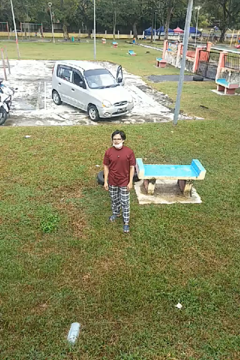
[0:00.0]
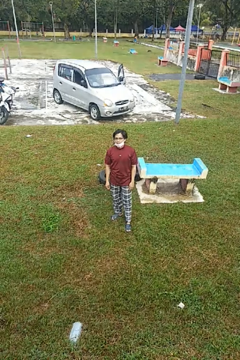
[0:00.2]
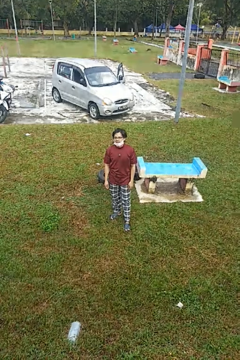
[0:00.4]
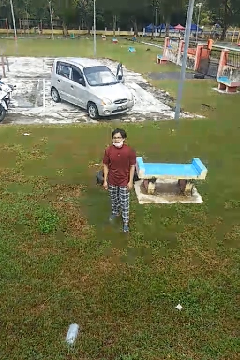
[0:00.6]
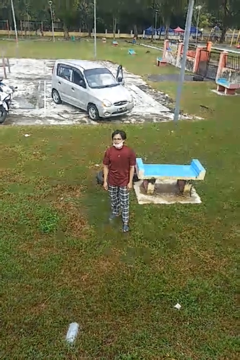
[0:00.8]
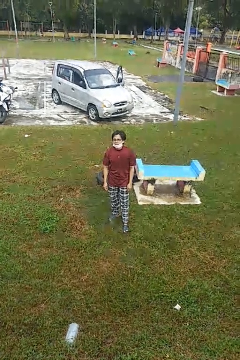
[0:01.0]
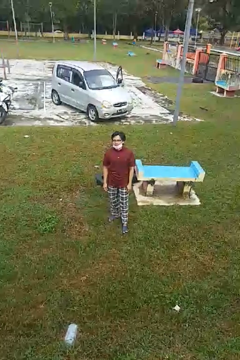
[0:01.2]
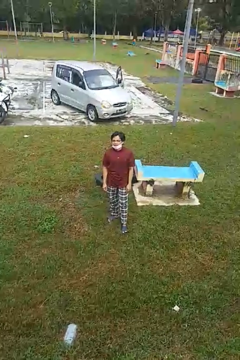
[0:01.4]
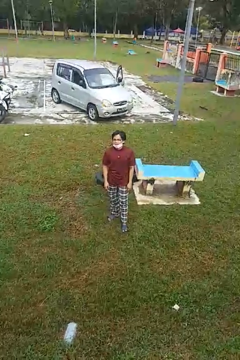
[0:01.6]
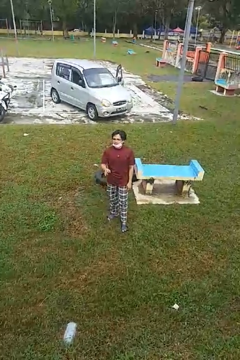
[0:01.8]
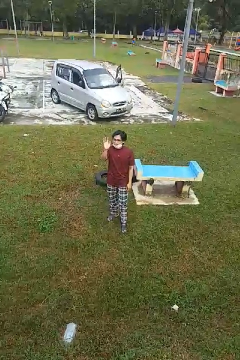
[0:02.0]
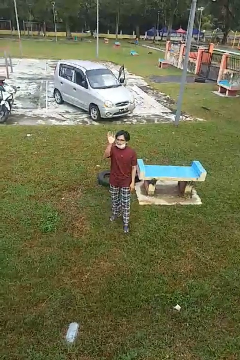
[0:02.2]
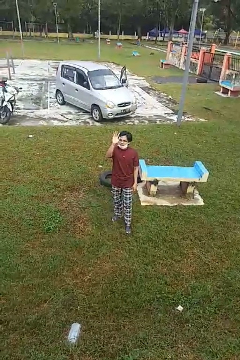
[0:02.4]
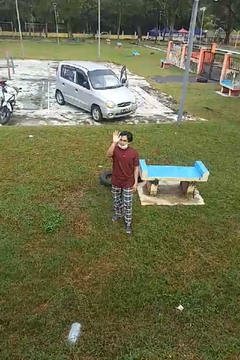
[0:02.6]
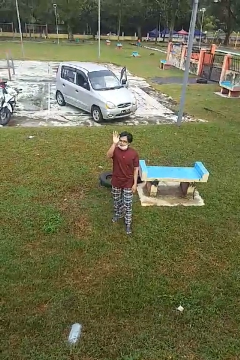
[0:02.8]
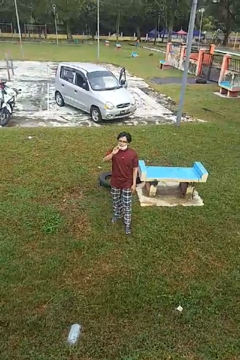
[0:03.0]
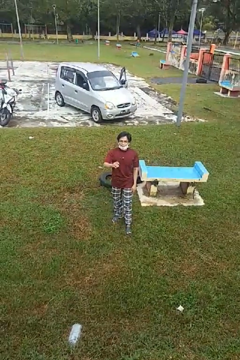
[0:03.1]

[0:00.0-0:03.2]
person waves at person

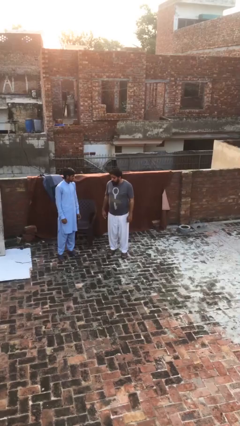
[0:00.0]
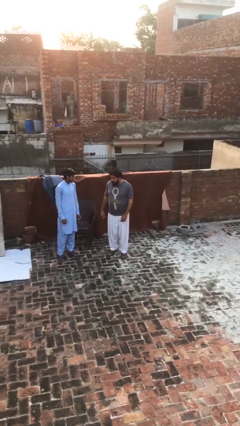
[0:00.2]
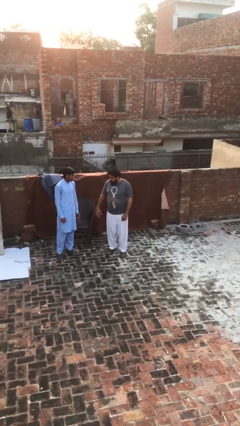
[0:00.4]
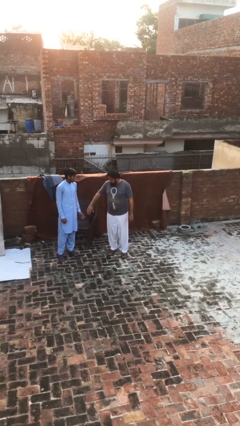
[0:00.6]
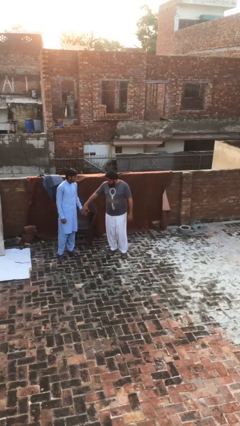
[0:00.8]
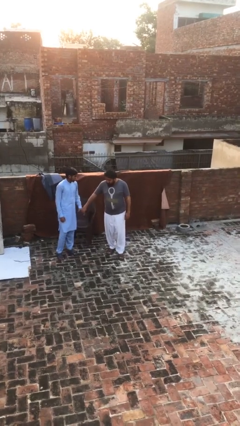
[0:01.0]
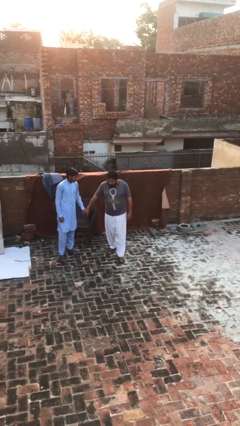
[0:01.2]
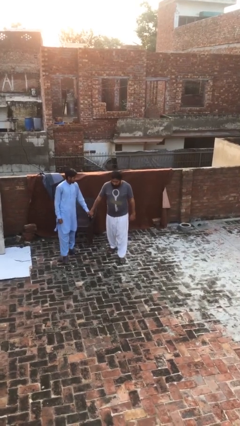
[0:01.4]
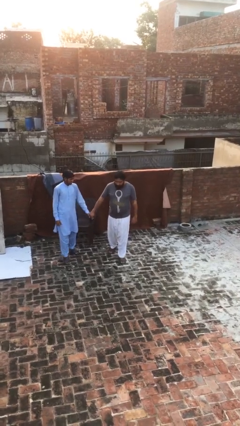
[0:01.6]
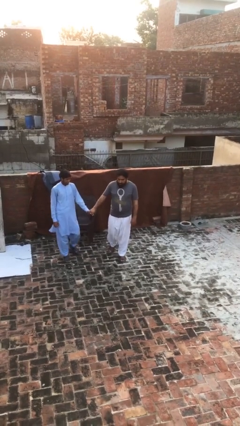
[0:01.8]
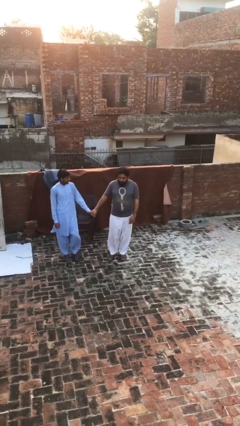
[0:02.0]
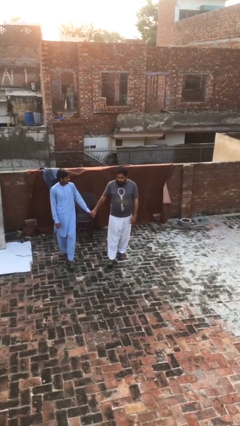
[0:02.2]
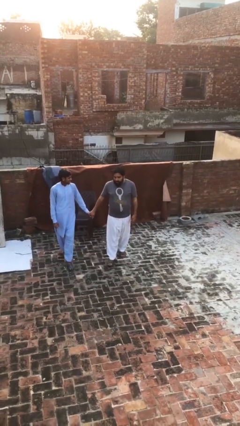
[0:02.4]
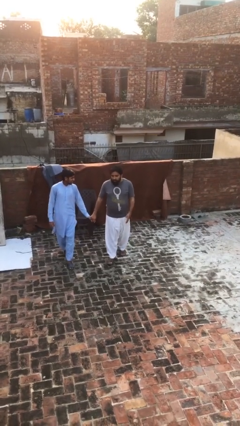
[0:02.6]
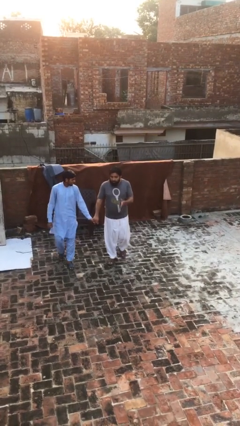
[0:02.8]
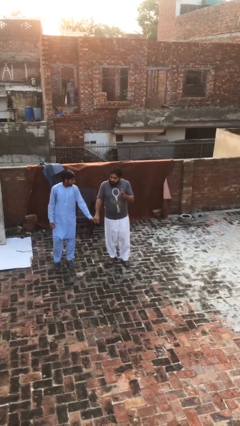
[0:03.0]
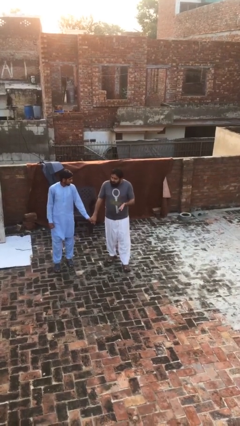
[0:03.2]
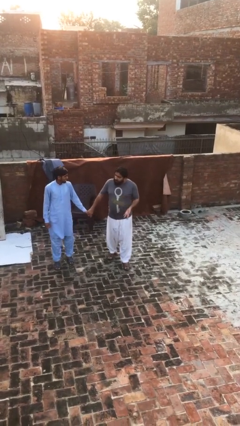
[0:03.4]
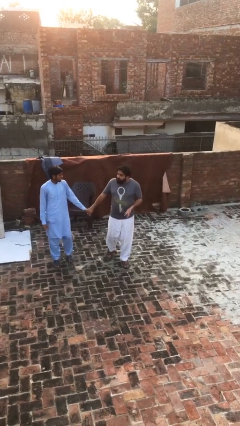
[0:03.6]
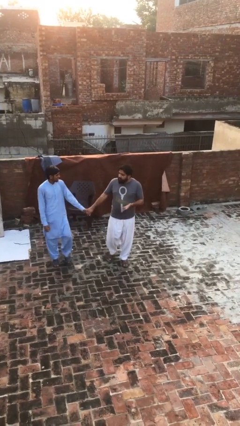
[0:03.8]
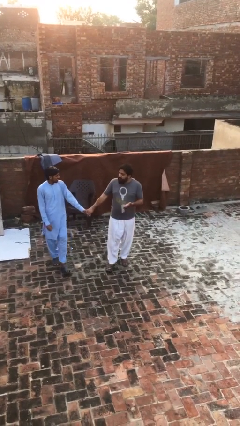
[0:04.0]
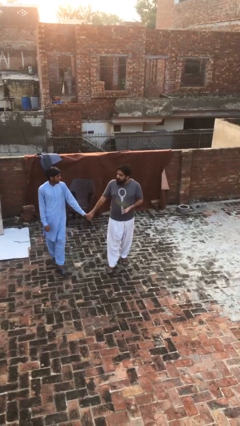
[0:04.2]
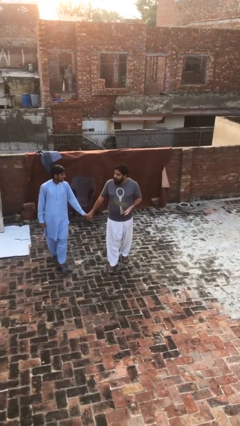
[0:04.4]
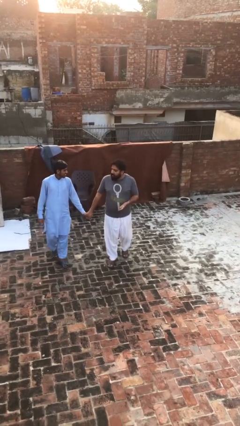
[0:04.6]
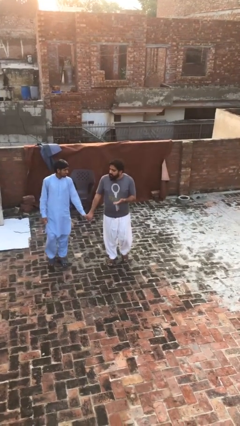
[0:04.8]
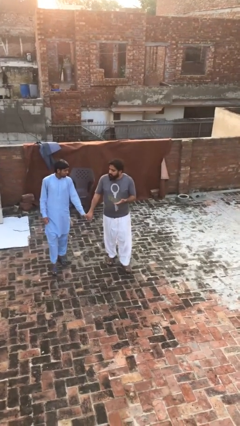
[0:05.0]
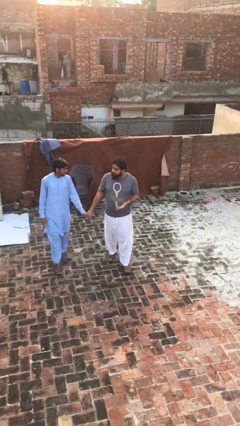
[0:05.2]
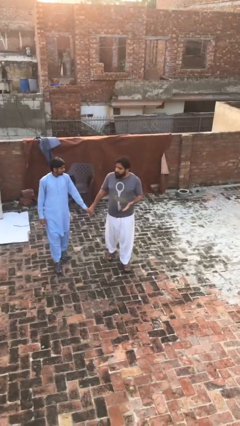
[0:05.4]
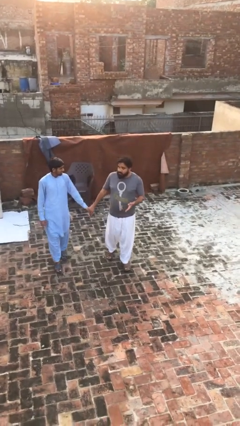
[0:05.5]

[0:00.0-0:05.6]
person holds hand

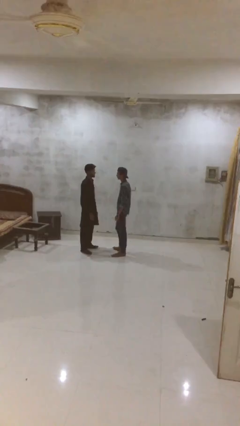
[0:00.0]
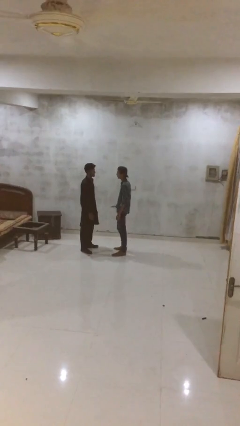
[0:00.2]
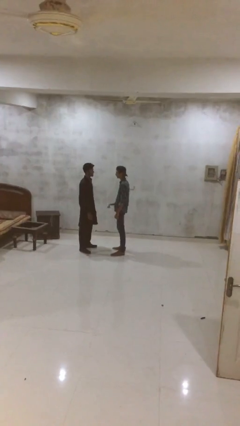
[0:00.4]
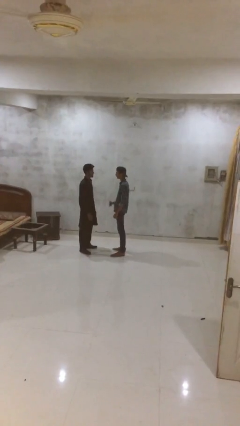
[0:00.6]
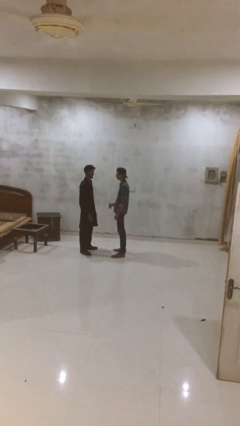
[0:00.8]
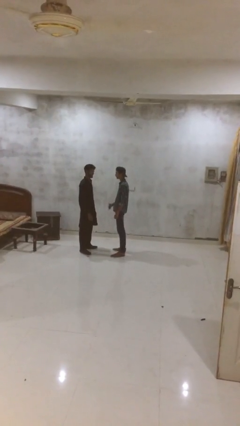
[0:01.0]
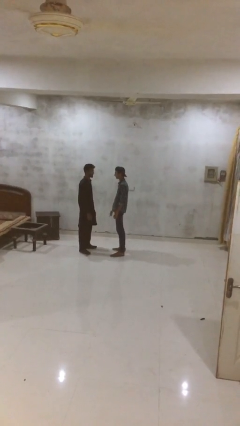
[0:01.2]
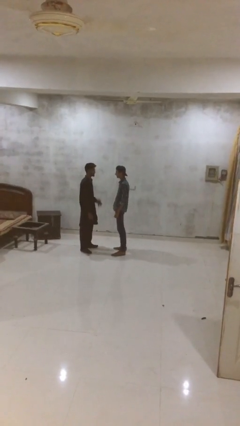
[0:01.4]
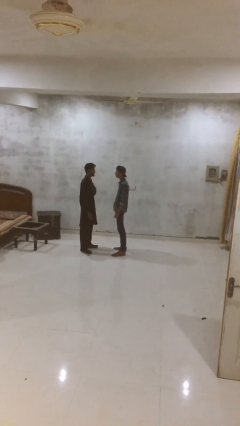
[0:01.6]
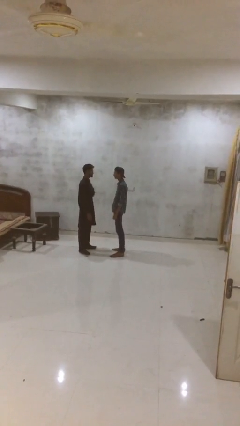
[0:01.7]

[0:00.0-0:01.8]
person talks to person

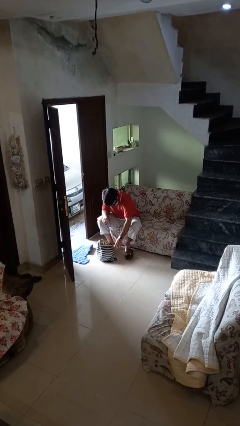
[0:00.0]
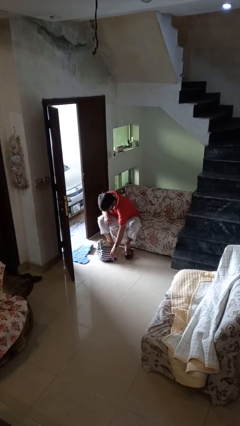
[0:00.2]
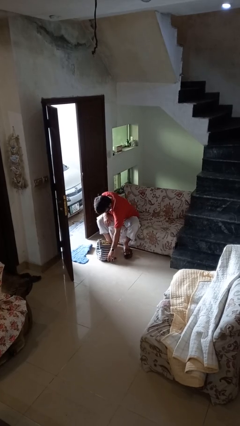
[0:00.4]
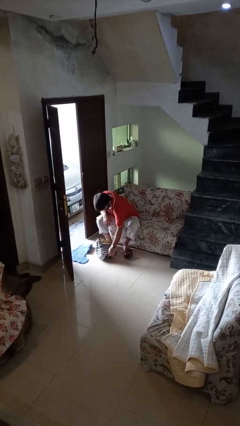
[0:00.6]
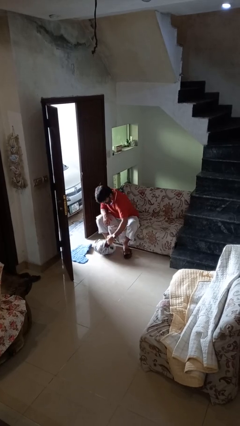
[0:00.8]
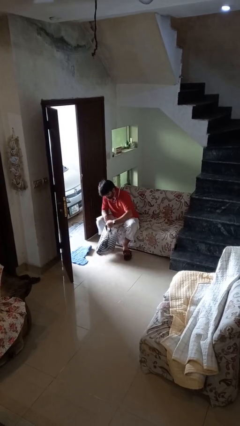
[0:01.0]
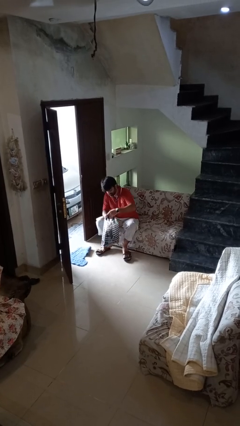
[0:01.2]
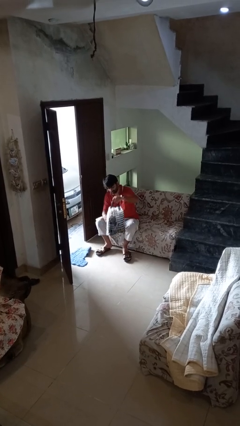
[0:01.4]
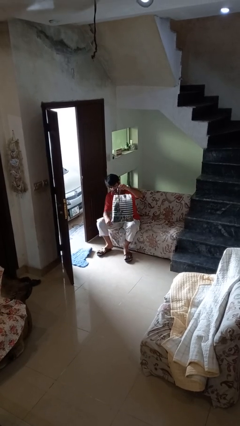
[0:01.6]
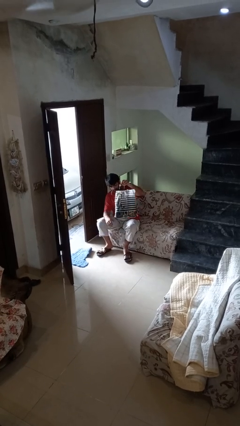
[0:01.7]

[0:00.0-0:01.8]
person picks up object from floor

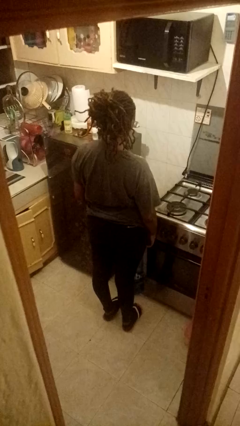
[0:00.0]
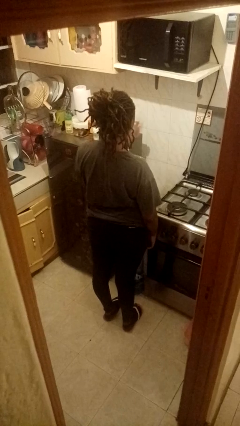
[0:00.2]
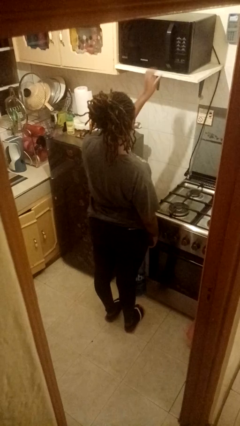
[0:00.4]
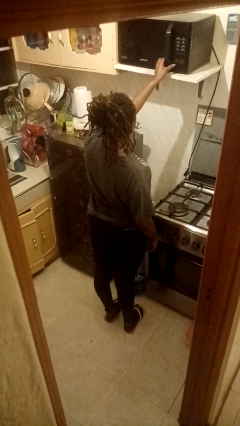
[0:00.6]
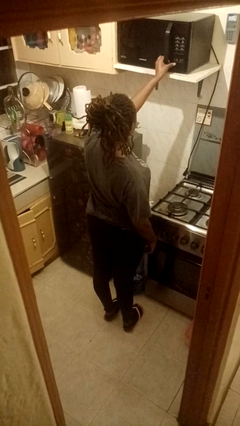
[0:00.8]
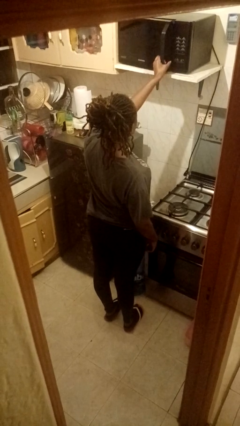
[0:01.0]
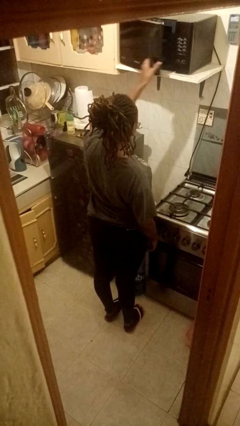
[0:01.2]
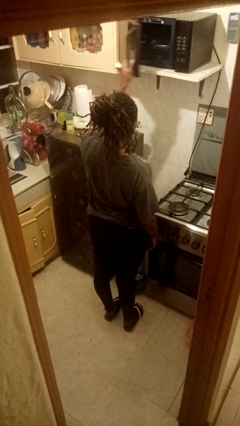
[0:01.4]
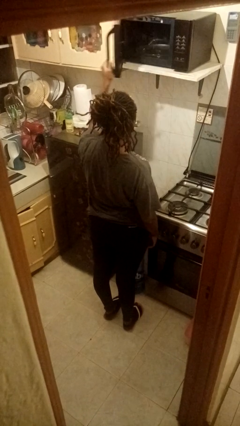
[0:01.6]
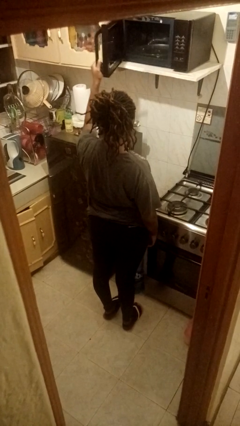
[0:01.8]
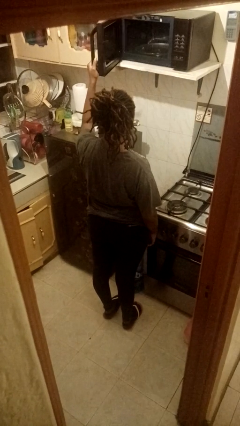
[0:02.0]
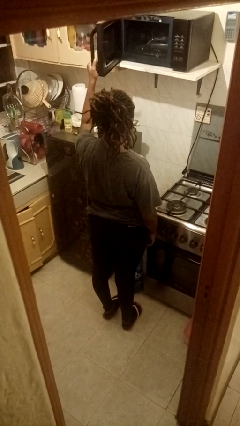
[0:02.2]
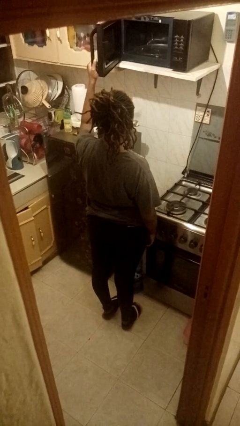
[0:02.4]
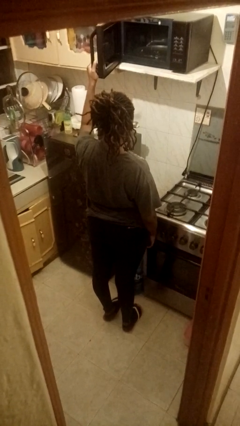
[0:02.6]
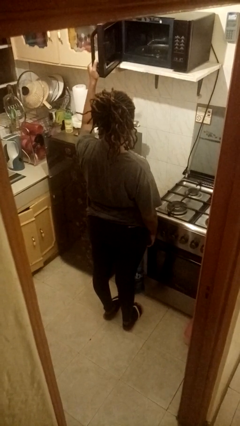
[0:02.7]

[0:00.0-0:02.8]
person opens microwave

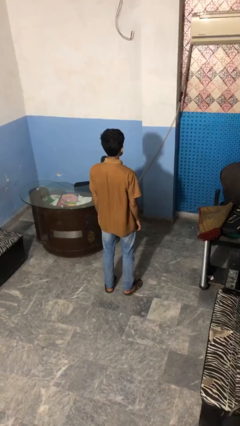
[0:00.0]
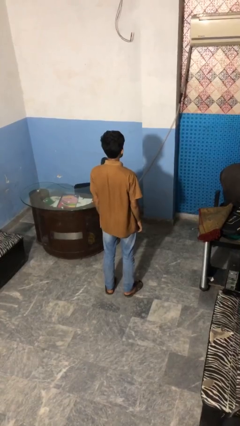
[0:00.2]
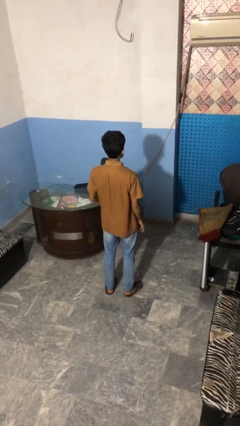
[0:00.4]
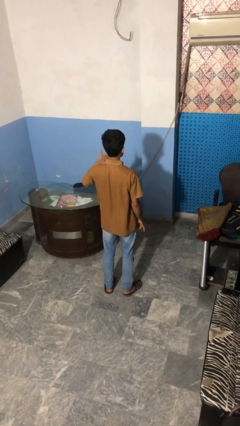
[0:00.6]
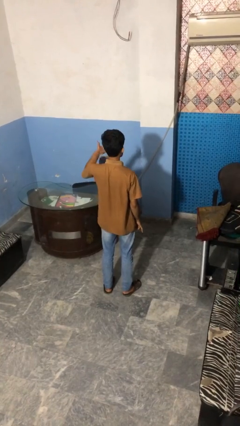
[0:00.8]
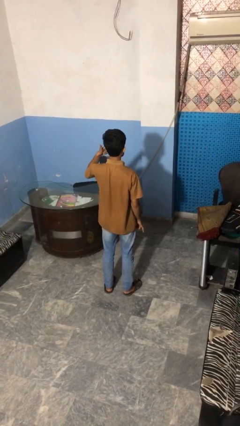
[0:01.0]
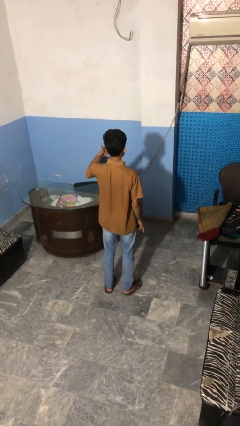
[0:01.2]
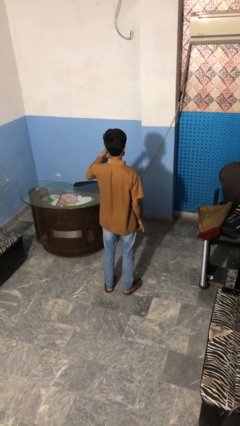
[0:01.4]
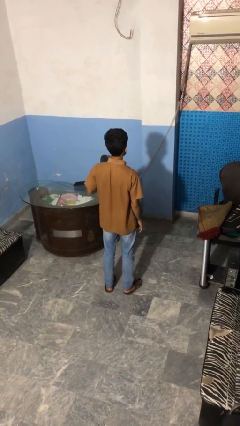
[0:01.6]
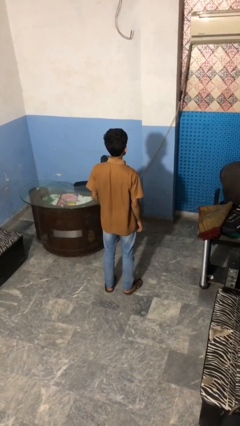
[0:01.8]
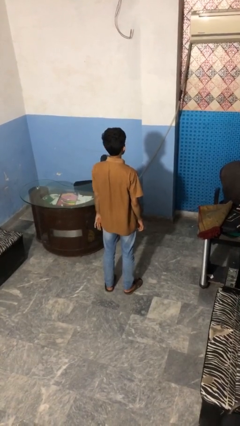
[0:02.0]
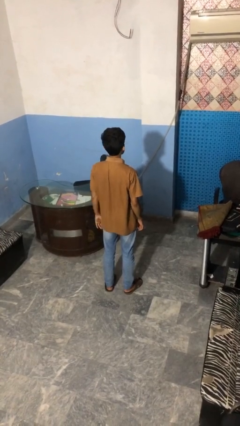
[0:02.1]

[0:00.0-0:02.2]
person gestures call me

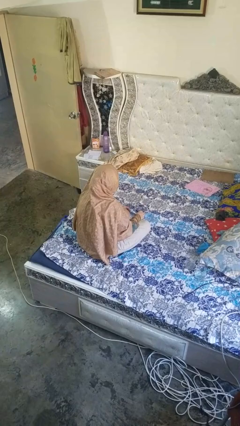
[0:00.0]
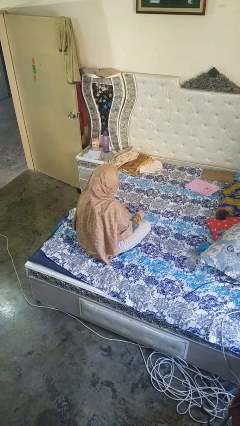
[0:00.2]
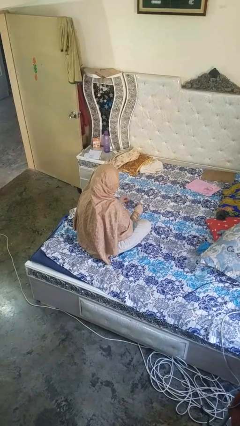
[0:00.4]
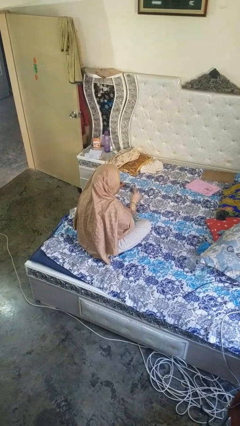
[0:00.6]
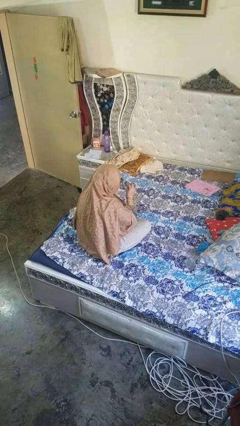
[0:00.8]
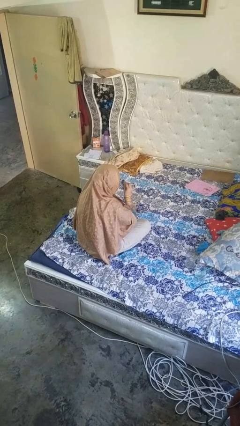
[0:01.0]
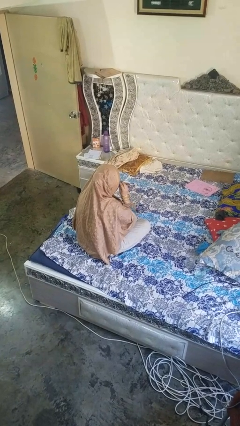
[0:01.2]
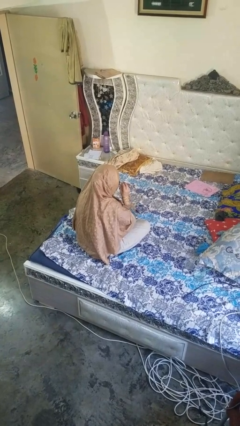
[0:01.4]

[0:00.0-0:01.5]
person puts on glasses
